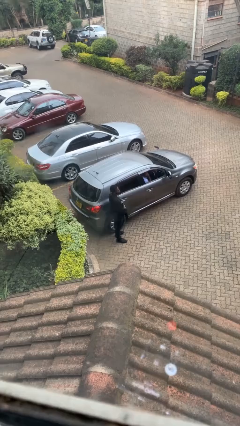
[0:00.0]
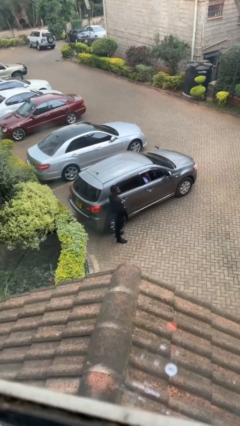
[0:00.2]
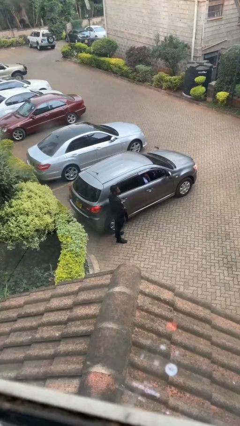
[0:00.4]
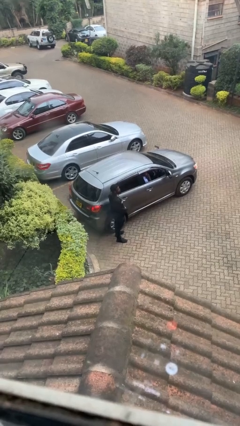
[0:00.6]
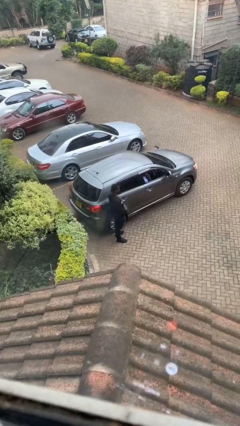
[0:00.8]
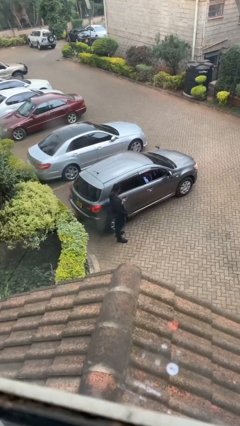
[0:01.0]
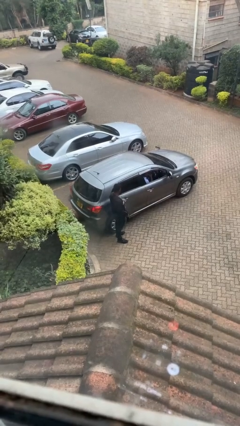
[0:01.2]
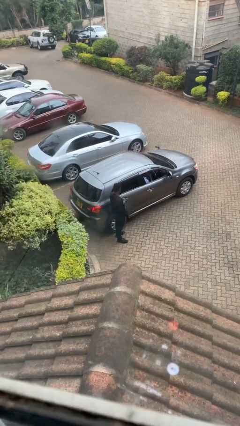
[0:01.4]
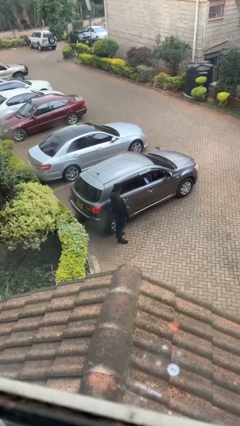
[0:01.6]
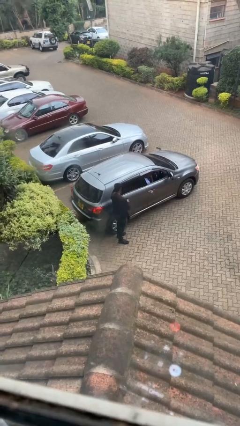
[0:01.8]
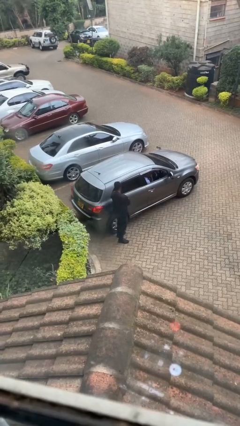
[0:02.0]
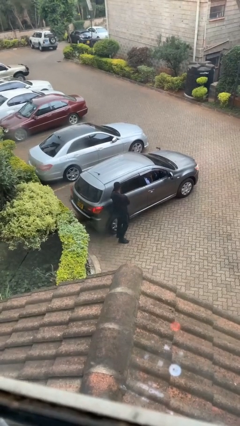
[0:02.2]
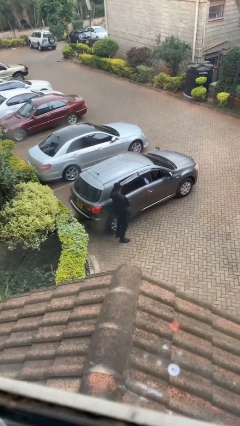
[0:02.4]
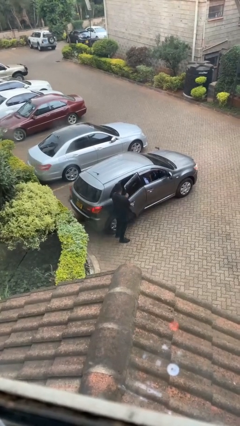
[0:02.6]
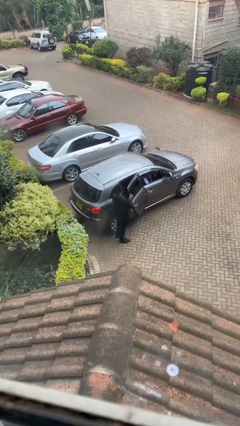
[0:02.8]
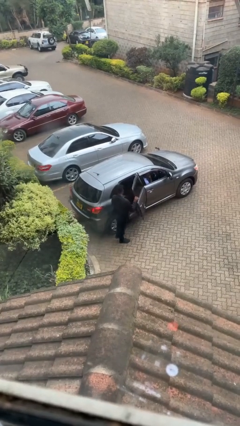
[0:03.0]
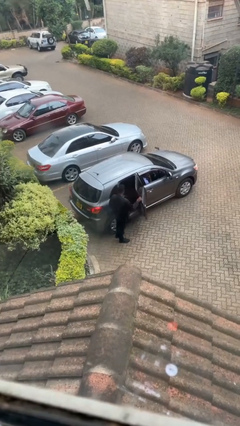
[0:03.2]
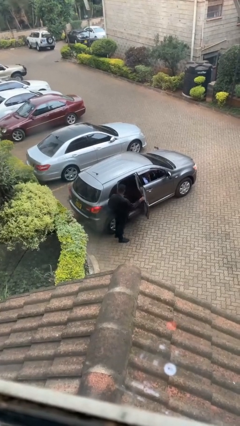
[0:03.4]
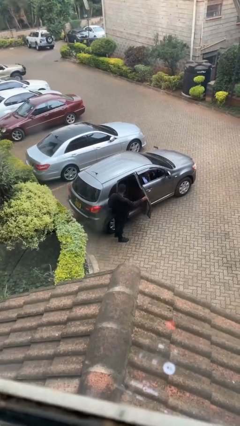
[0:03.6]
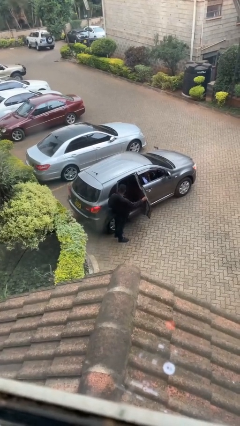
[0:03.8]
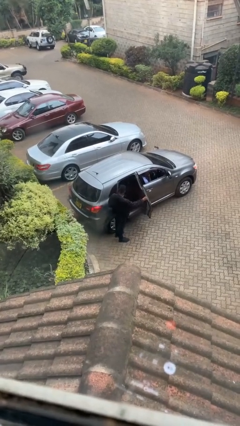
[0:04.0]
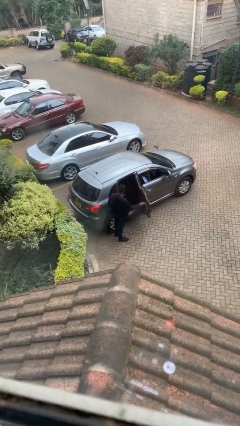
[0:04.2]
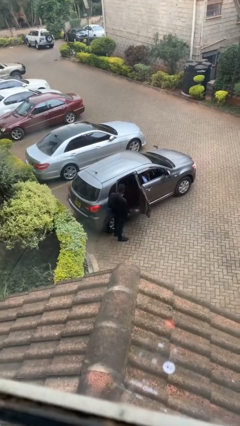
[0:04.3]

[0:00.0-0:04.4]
person opens car door

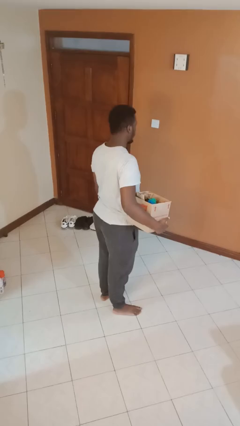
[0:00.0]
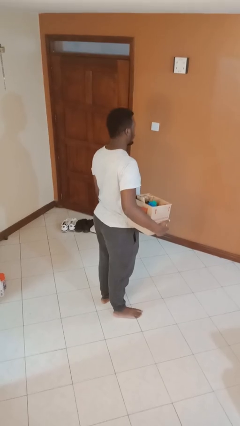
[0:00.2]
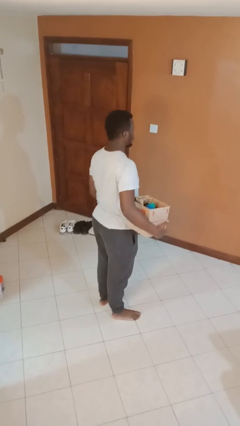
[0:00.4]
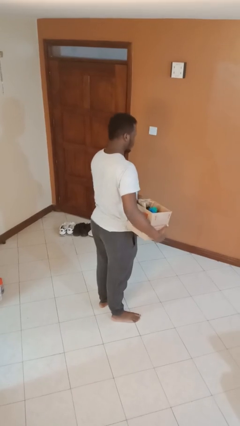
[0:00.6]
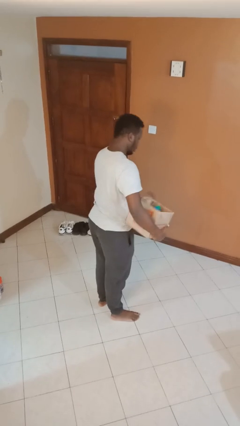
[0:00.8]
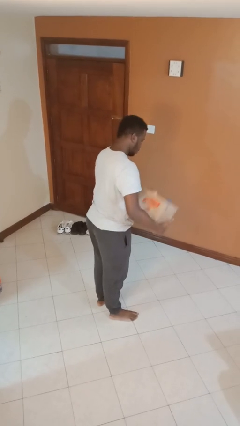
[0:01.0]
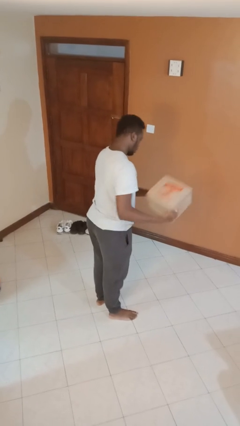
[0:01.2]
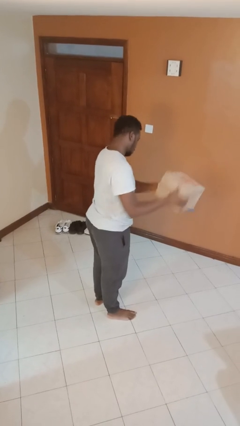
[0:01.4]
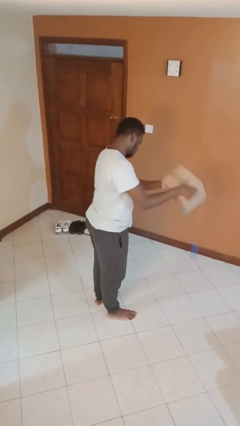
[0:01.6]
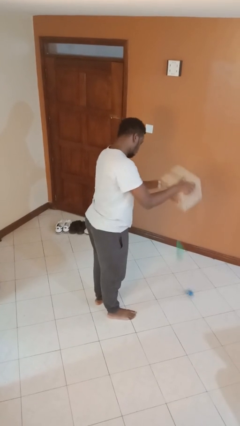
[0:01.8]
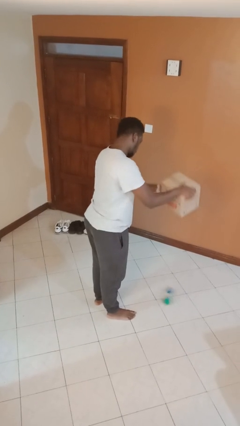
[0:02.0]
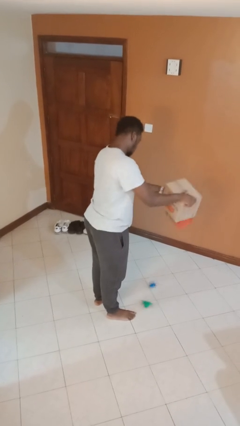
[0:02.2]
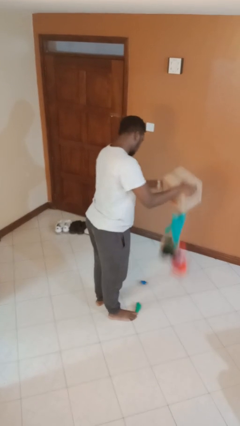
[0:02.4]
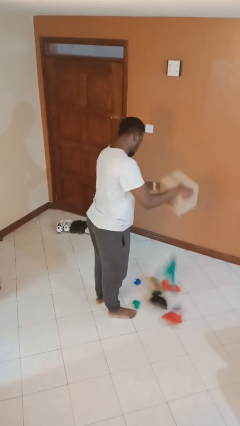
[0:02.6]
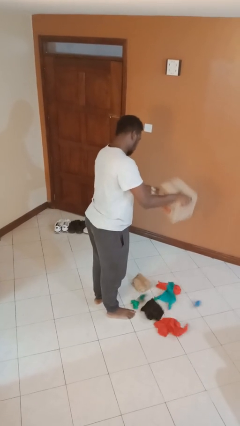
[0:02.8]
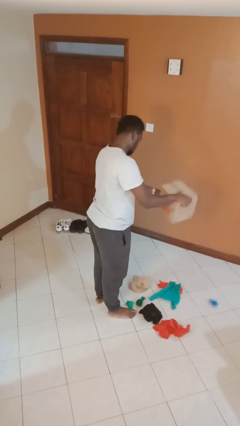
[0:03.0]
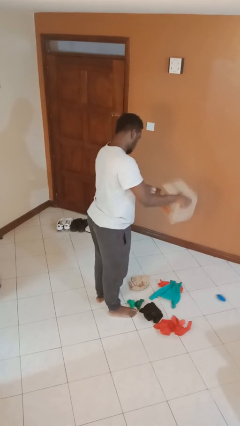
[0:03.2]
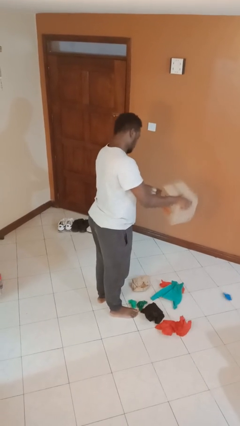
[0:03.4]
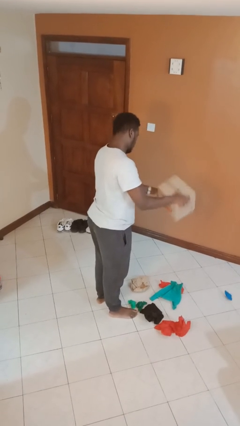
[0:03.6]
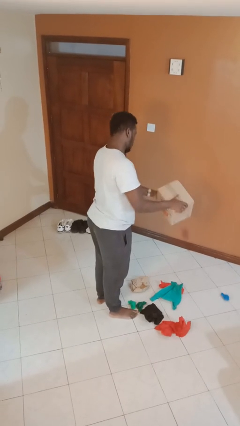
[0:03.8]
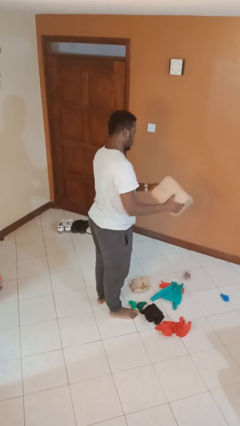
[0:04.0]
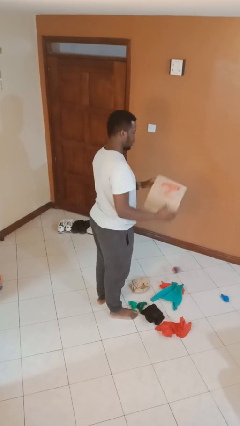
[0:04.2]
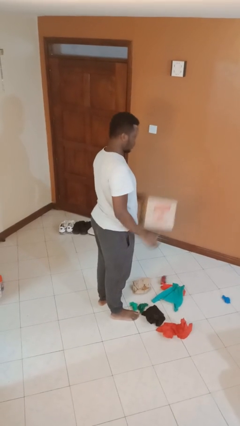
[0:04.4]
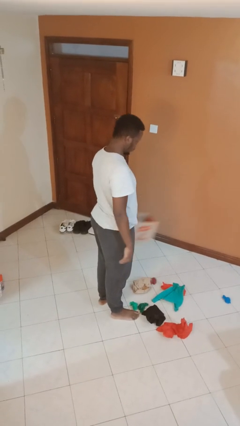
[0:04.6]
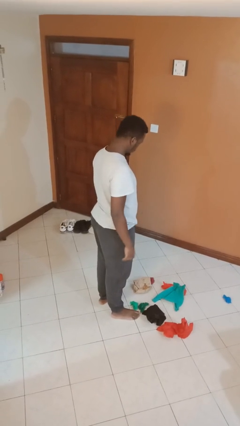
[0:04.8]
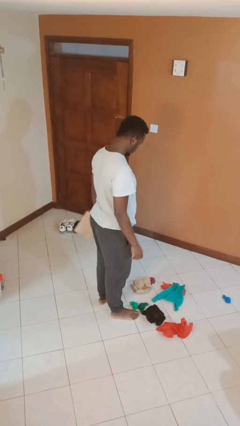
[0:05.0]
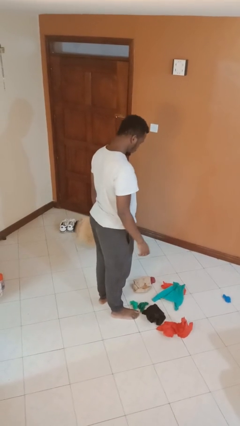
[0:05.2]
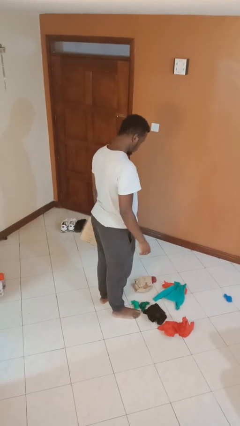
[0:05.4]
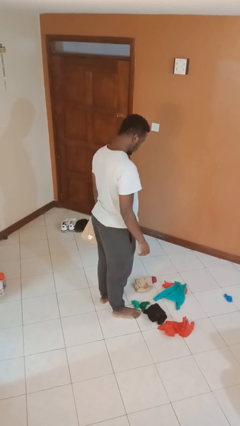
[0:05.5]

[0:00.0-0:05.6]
person unloads box onto floor

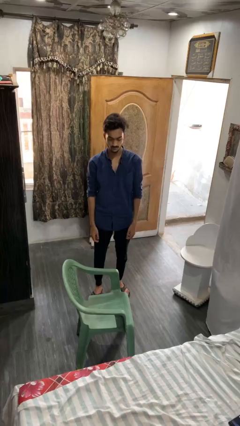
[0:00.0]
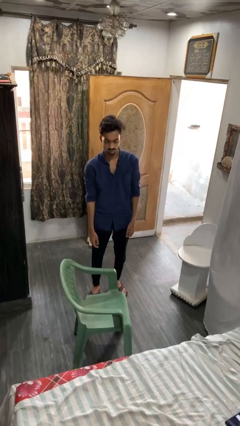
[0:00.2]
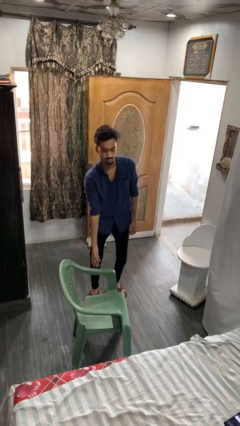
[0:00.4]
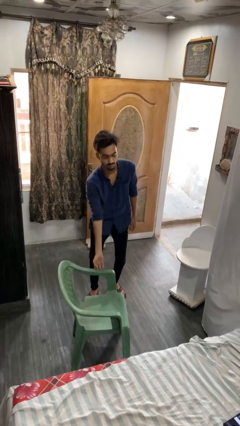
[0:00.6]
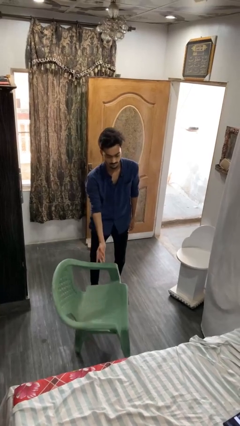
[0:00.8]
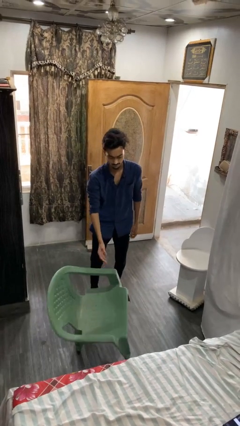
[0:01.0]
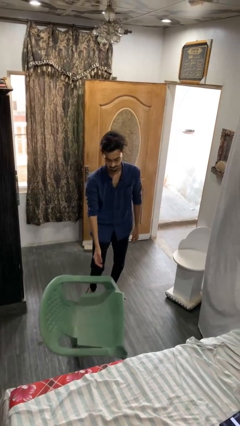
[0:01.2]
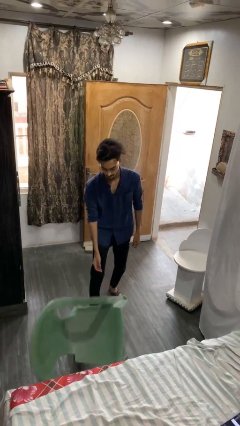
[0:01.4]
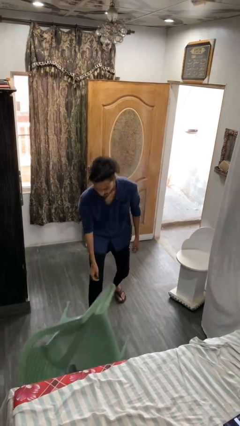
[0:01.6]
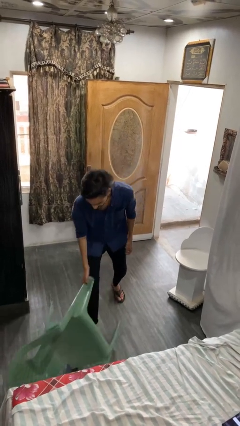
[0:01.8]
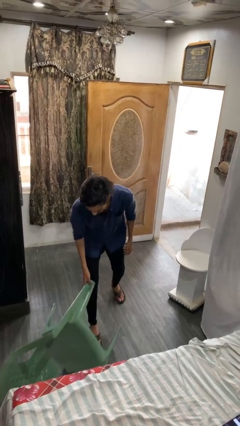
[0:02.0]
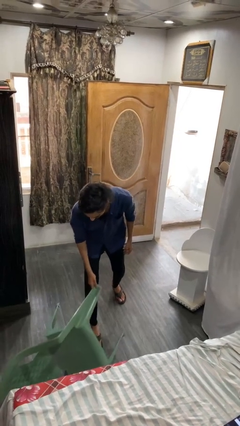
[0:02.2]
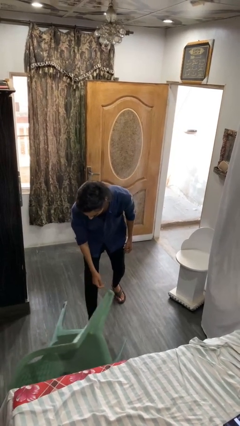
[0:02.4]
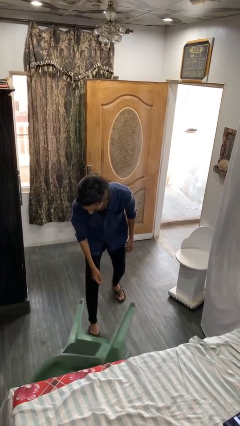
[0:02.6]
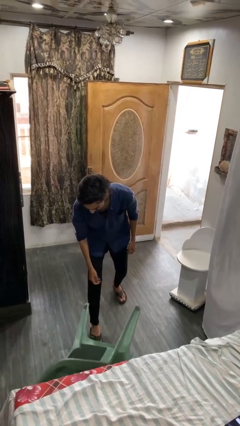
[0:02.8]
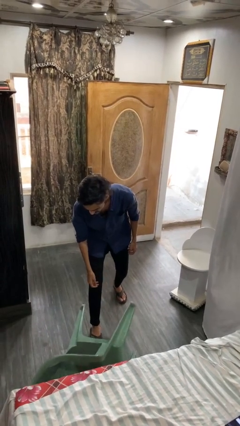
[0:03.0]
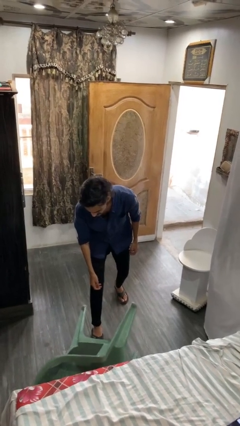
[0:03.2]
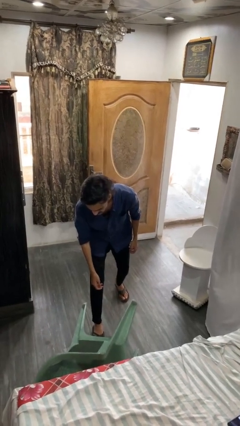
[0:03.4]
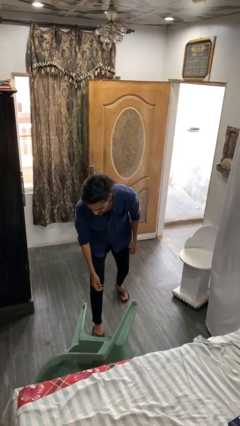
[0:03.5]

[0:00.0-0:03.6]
person knocks over furniture

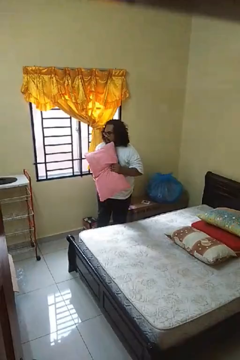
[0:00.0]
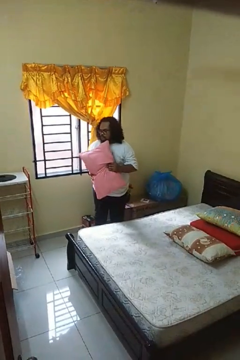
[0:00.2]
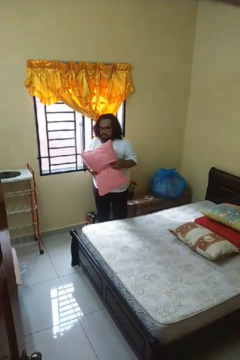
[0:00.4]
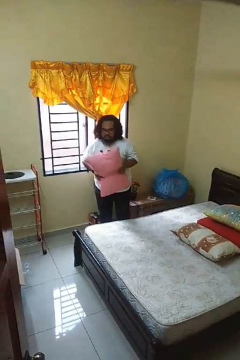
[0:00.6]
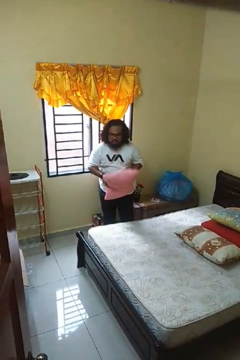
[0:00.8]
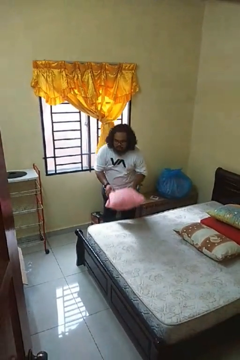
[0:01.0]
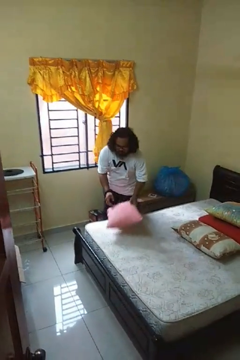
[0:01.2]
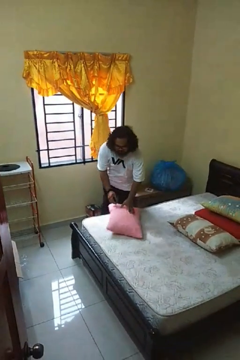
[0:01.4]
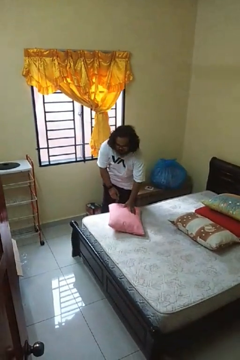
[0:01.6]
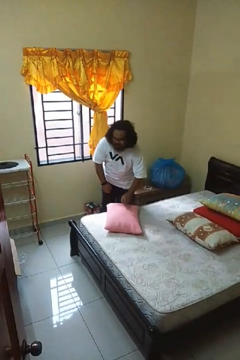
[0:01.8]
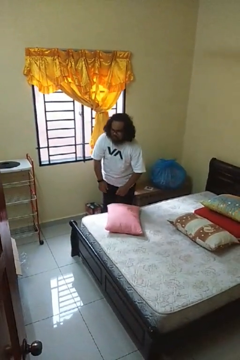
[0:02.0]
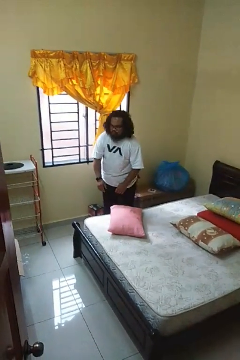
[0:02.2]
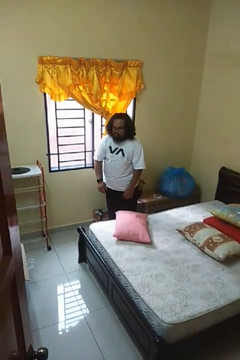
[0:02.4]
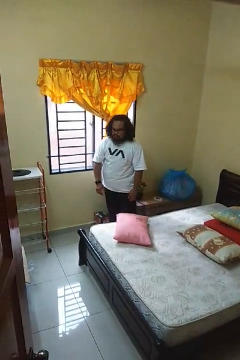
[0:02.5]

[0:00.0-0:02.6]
person puts down object on bed

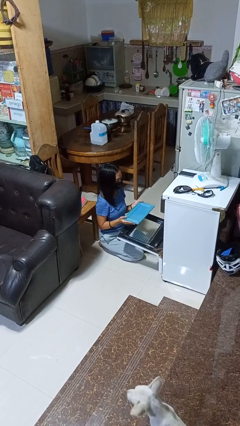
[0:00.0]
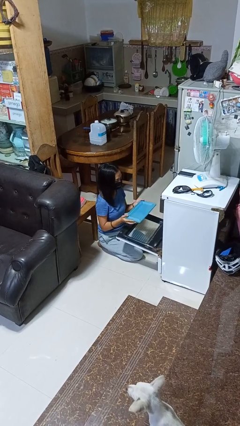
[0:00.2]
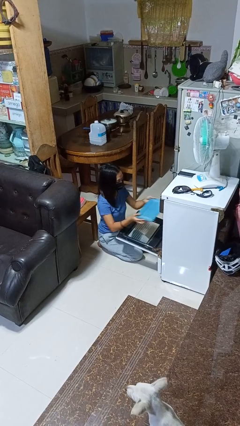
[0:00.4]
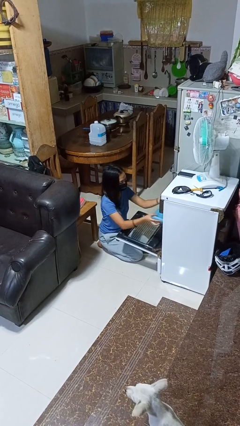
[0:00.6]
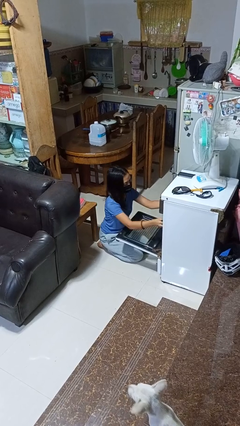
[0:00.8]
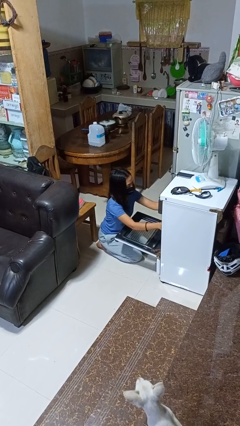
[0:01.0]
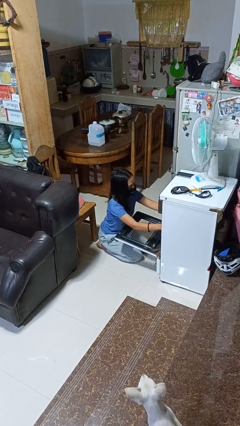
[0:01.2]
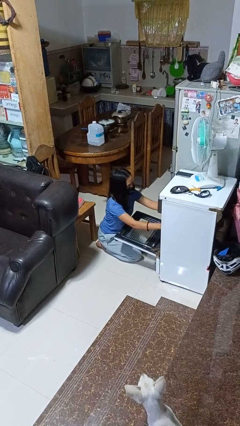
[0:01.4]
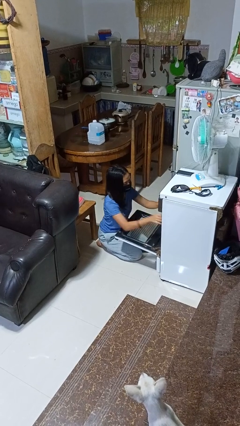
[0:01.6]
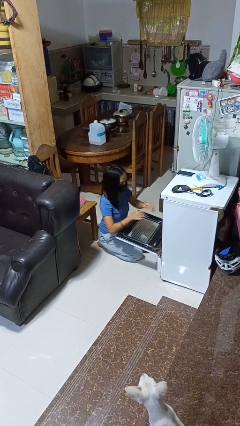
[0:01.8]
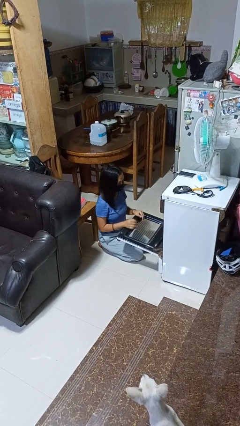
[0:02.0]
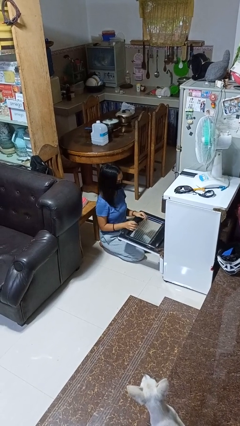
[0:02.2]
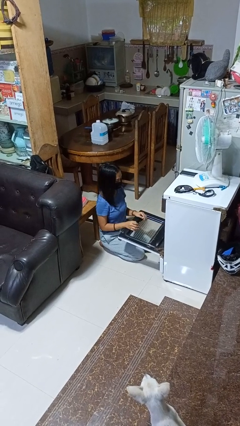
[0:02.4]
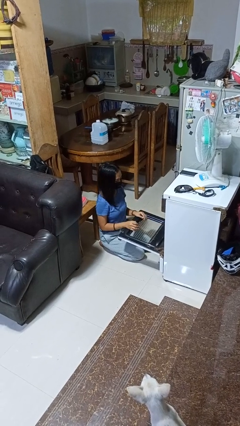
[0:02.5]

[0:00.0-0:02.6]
person puts object into oven
